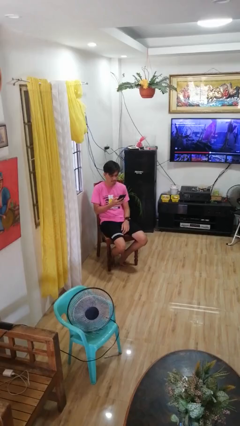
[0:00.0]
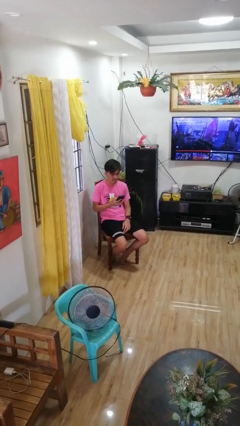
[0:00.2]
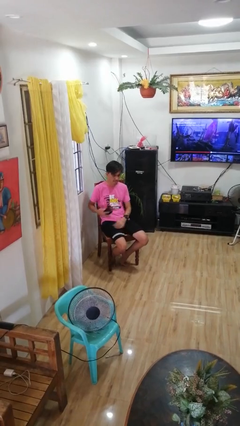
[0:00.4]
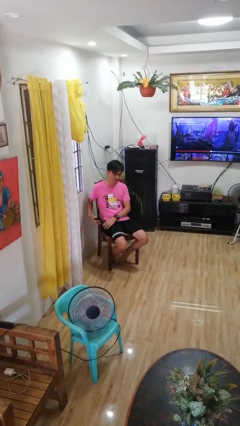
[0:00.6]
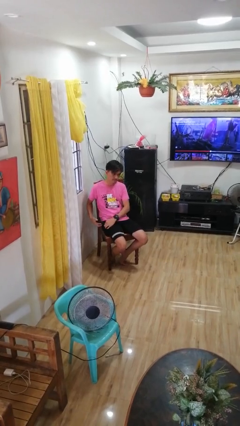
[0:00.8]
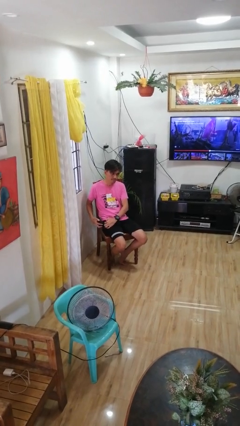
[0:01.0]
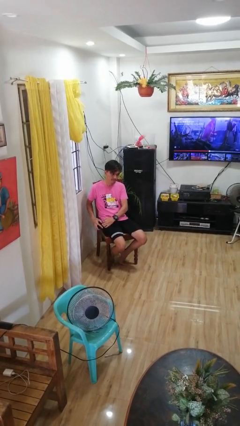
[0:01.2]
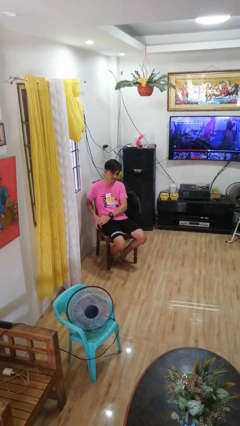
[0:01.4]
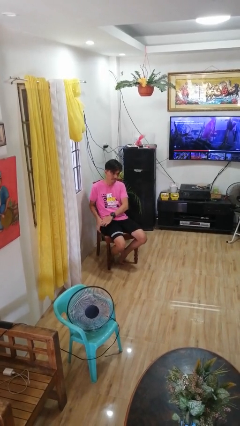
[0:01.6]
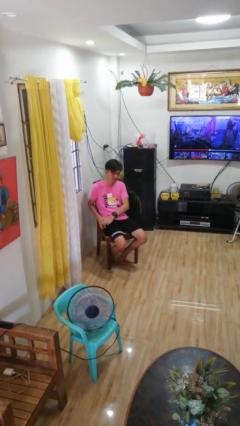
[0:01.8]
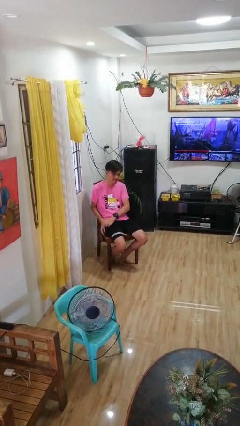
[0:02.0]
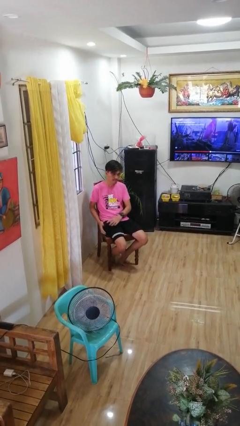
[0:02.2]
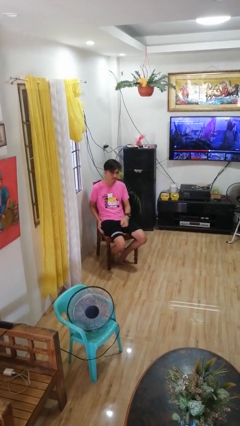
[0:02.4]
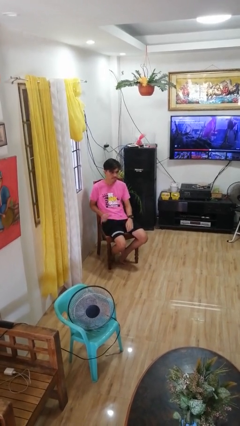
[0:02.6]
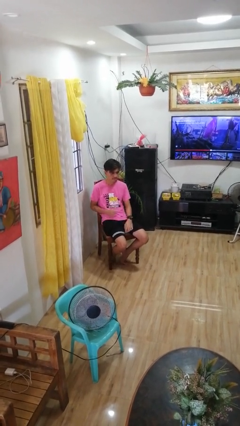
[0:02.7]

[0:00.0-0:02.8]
person puts phone into pocket

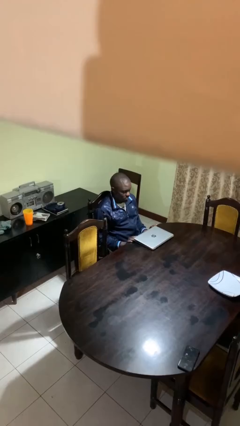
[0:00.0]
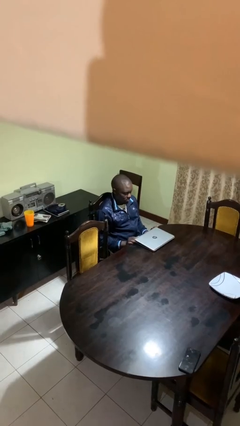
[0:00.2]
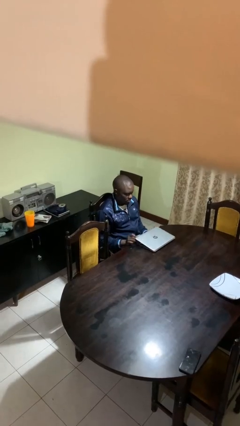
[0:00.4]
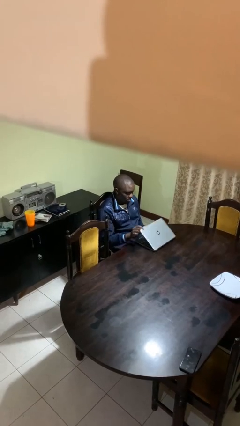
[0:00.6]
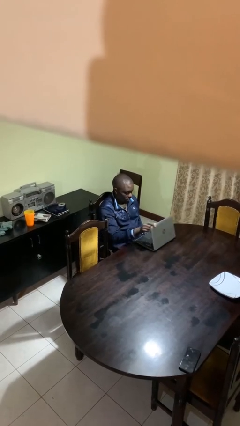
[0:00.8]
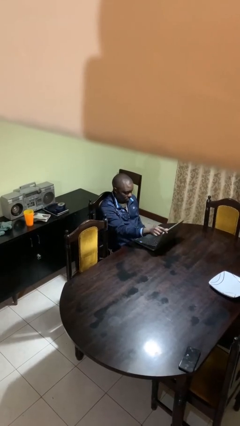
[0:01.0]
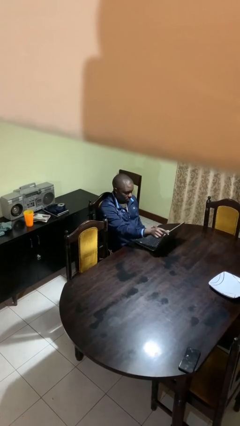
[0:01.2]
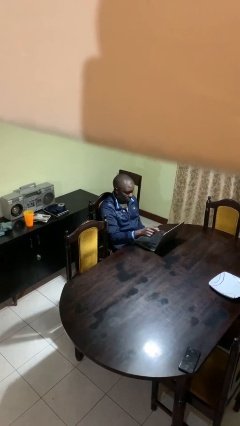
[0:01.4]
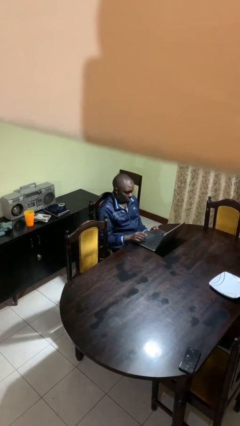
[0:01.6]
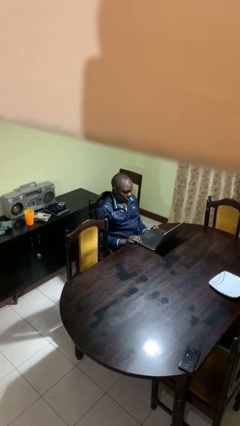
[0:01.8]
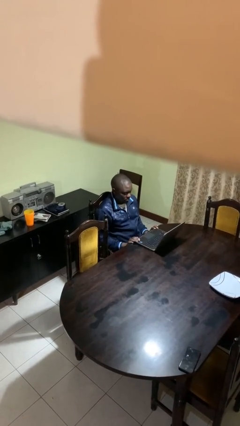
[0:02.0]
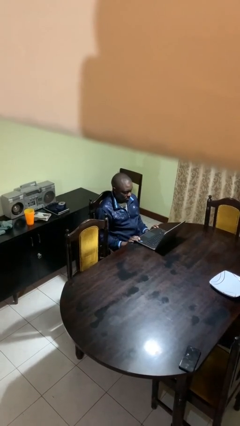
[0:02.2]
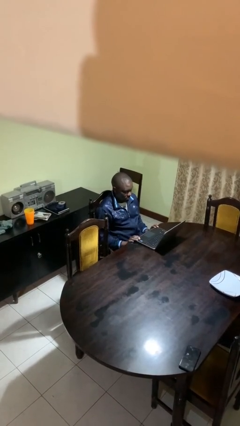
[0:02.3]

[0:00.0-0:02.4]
person opens laptop

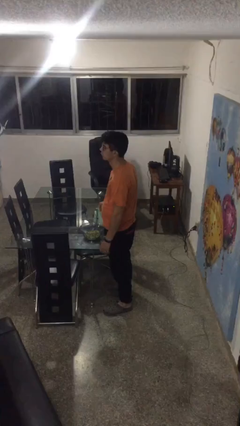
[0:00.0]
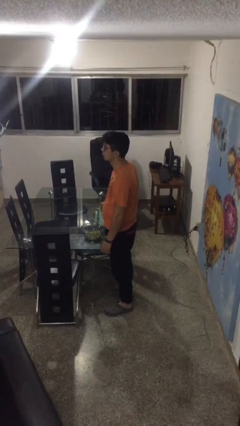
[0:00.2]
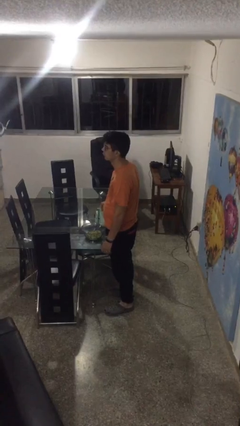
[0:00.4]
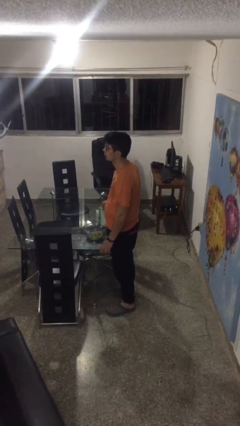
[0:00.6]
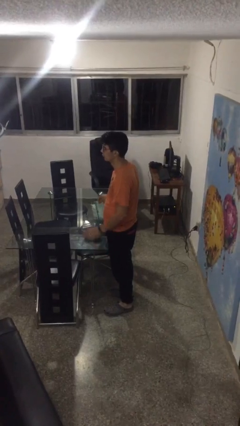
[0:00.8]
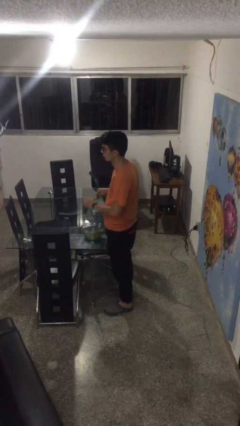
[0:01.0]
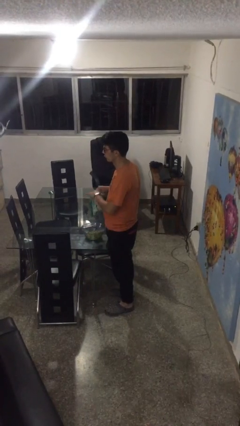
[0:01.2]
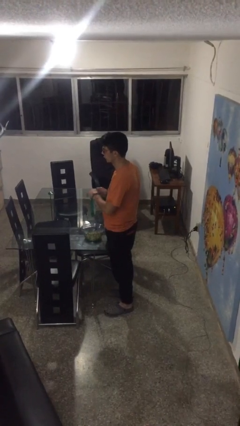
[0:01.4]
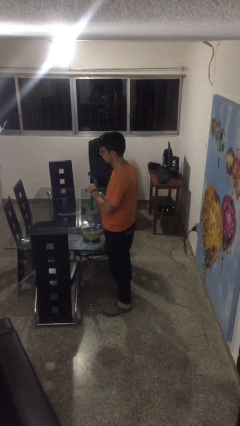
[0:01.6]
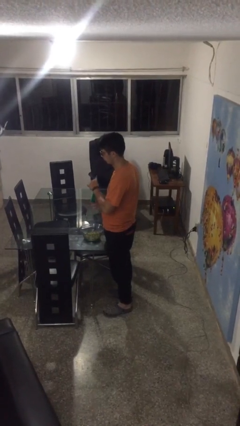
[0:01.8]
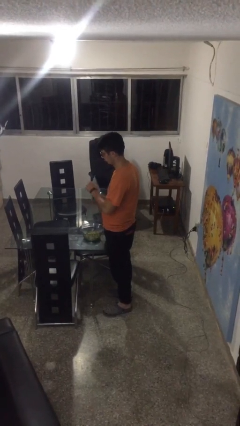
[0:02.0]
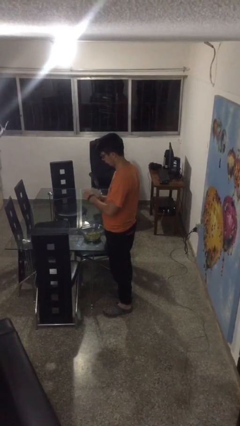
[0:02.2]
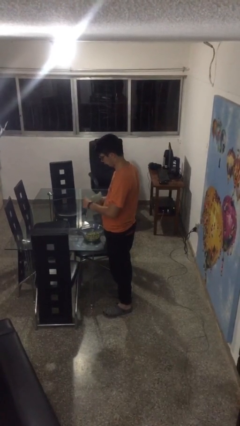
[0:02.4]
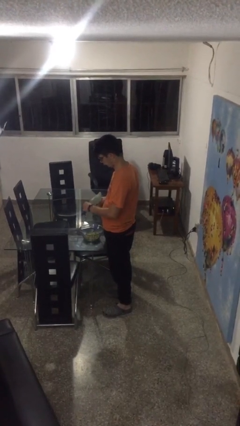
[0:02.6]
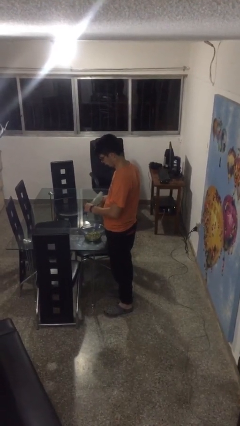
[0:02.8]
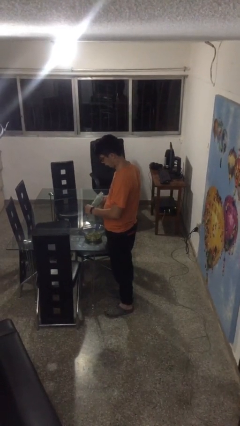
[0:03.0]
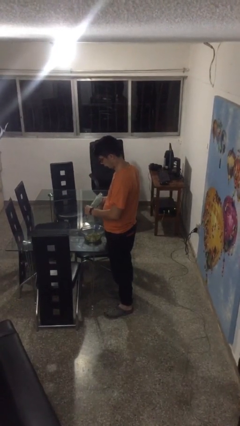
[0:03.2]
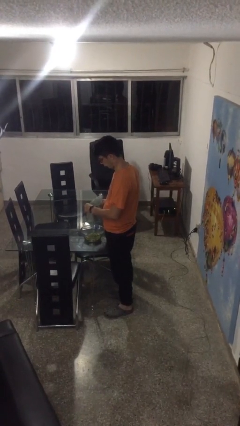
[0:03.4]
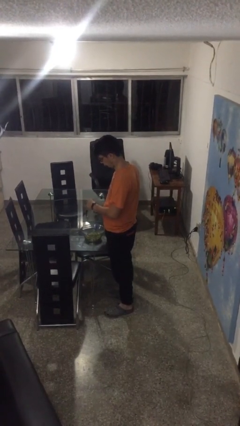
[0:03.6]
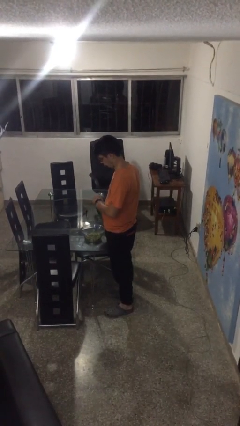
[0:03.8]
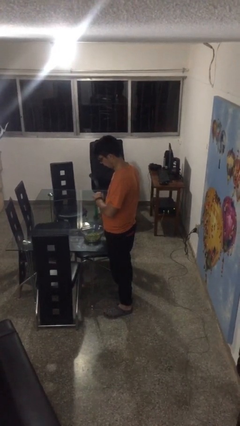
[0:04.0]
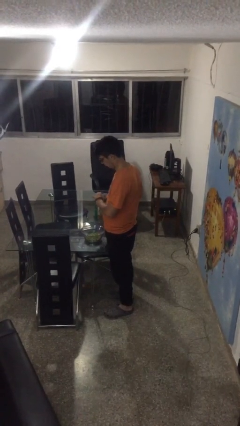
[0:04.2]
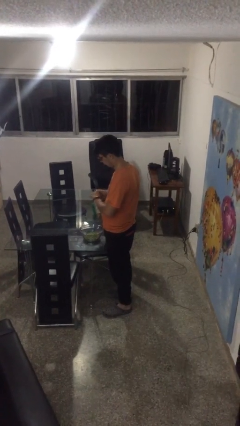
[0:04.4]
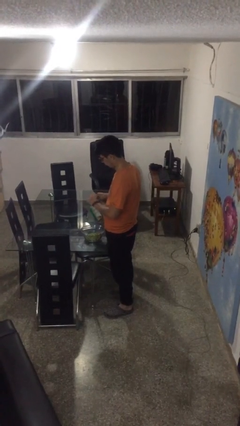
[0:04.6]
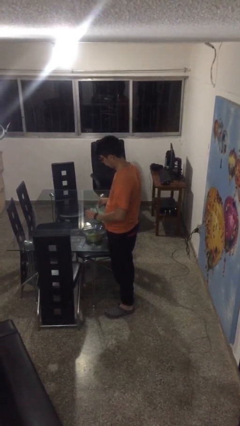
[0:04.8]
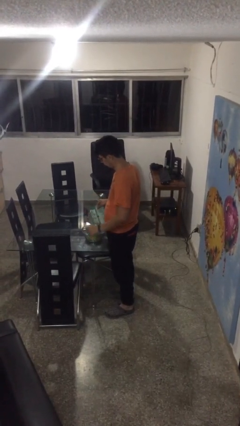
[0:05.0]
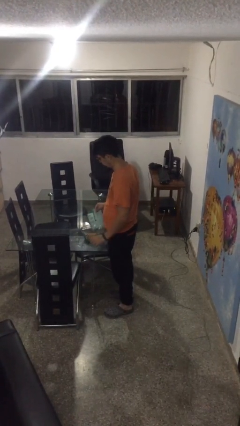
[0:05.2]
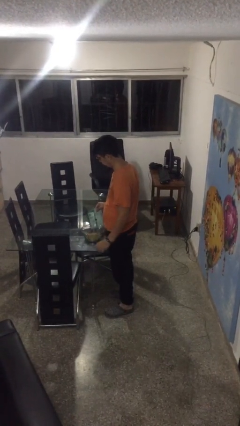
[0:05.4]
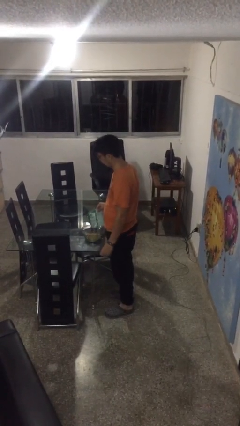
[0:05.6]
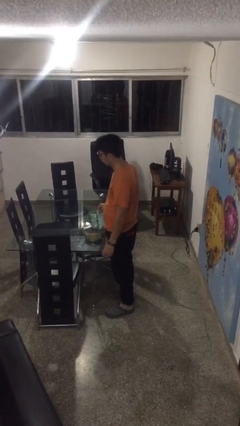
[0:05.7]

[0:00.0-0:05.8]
person pours into bowl

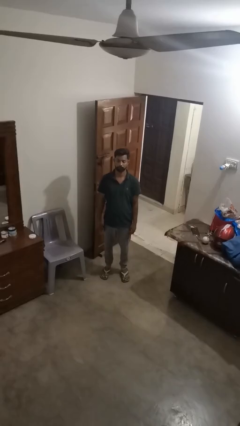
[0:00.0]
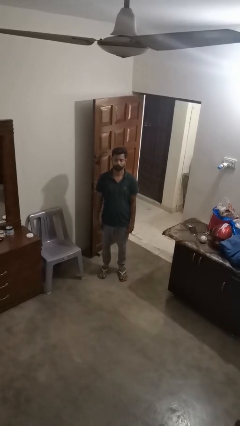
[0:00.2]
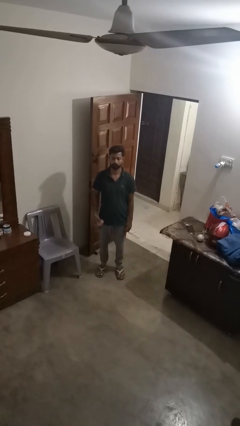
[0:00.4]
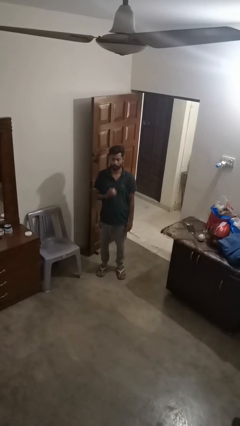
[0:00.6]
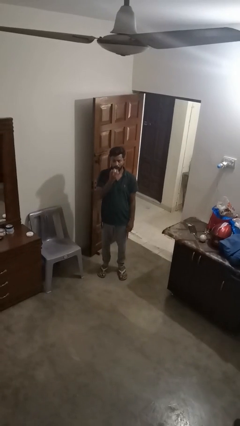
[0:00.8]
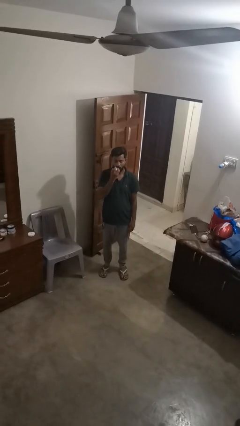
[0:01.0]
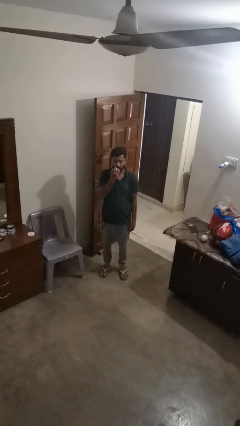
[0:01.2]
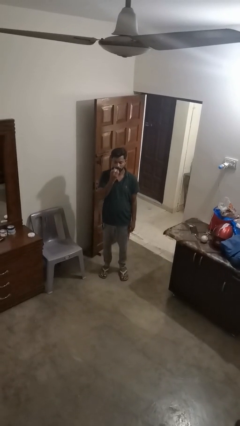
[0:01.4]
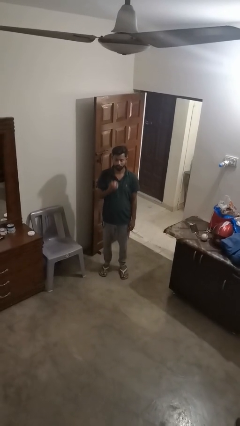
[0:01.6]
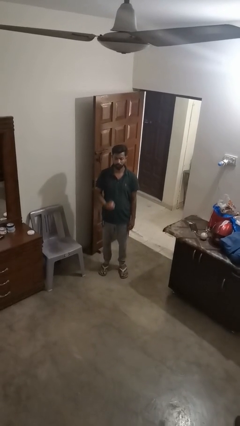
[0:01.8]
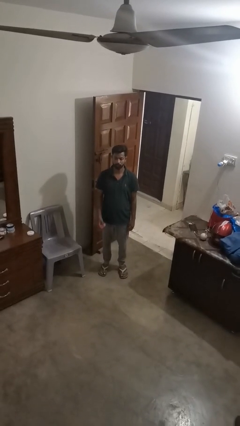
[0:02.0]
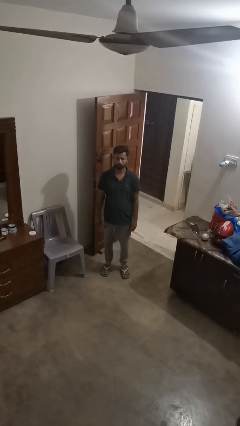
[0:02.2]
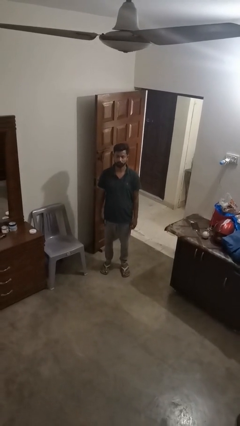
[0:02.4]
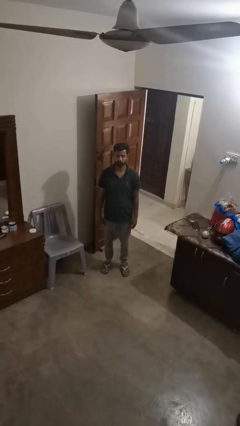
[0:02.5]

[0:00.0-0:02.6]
person eats apple

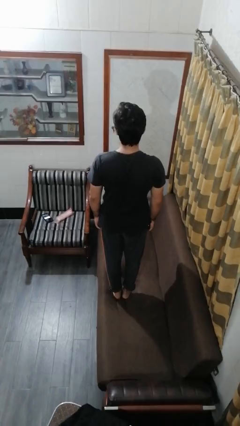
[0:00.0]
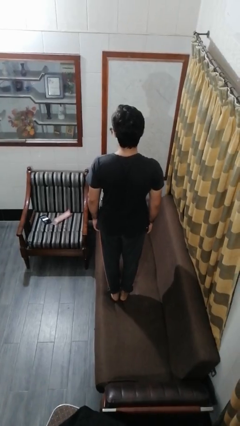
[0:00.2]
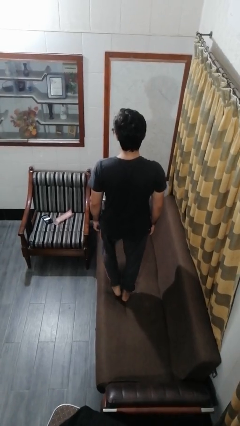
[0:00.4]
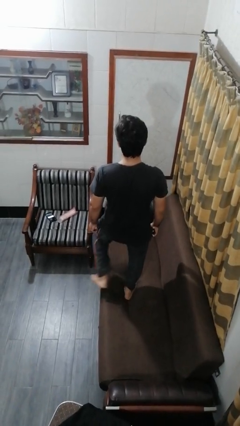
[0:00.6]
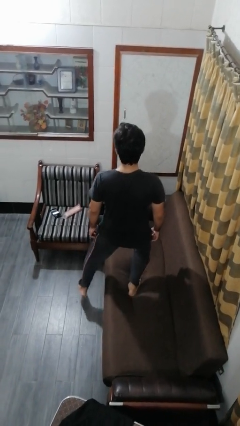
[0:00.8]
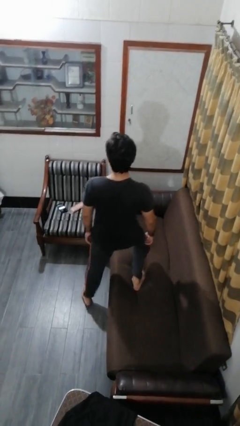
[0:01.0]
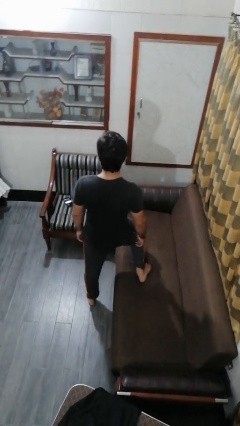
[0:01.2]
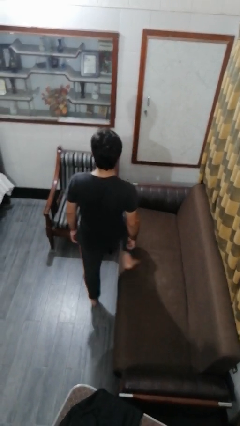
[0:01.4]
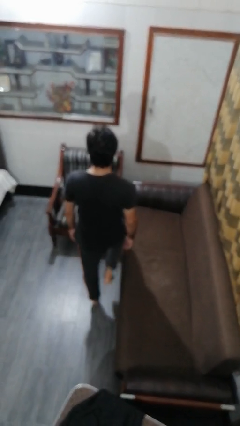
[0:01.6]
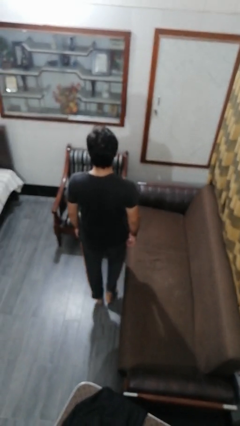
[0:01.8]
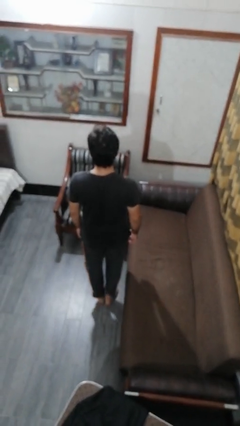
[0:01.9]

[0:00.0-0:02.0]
person climbs off couch

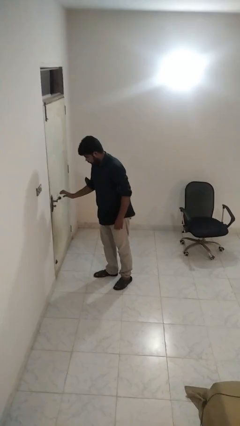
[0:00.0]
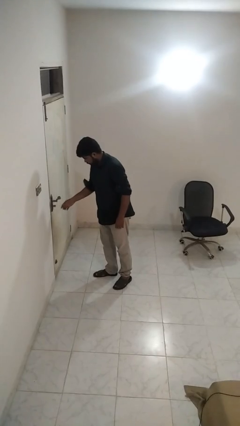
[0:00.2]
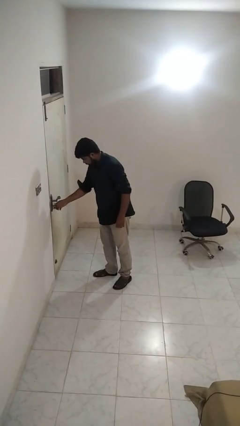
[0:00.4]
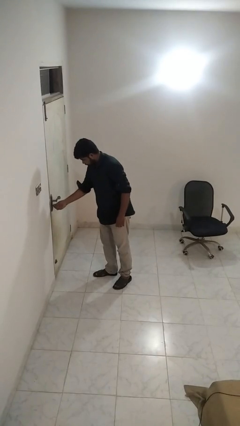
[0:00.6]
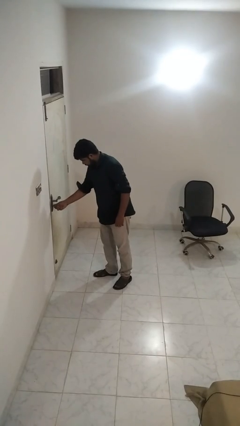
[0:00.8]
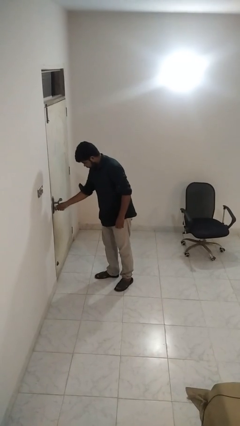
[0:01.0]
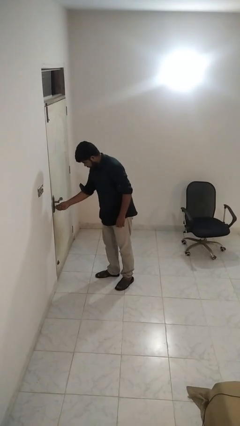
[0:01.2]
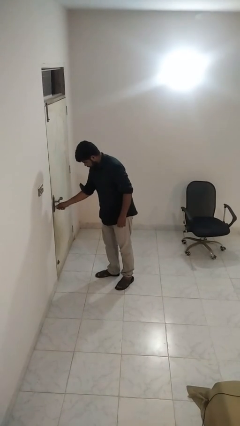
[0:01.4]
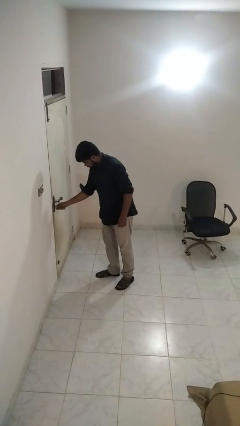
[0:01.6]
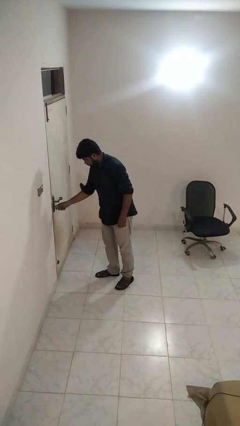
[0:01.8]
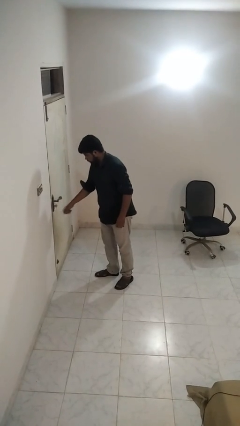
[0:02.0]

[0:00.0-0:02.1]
person locks door with keys

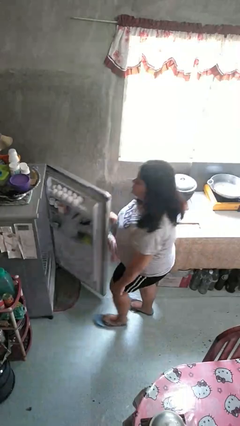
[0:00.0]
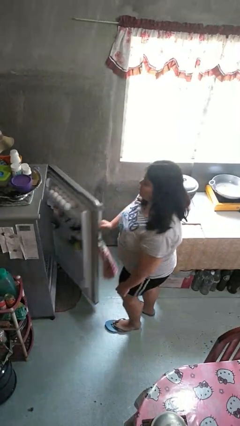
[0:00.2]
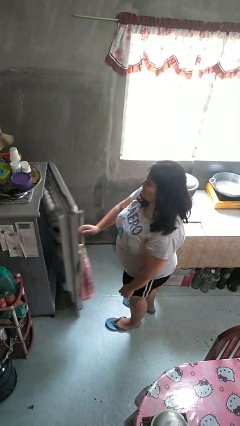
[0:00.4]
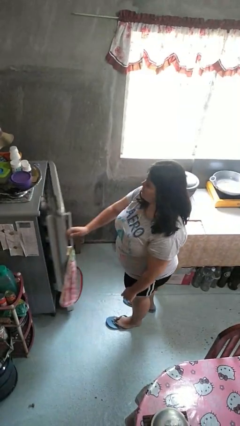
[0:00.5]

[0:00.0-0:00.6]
person closes refrigerator
